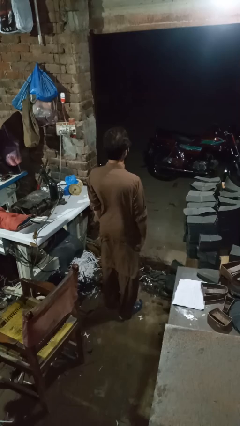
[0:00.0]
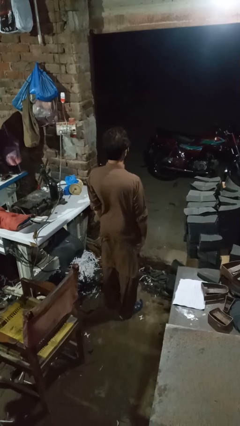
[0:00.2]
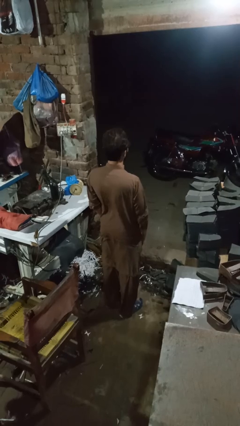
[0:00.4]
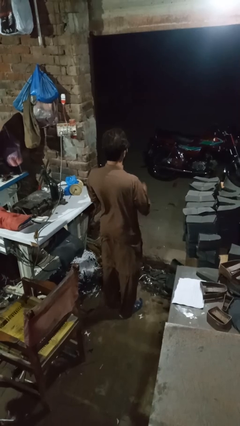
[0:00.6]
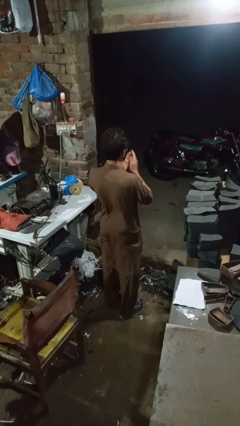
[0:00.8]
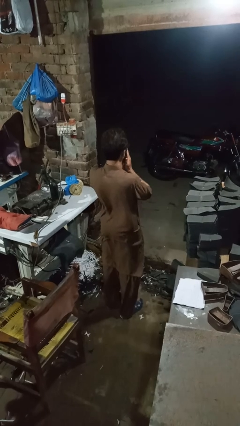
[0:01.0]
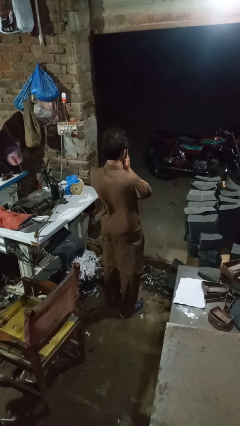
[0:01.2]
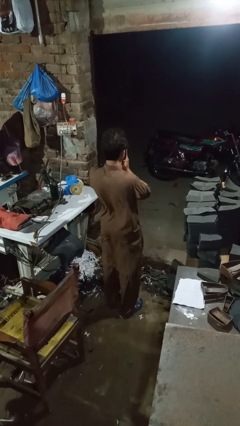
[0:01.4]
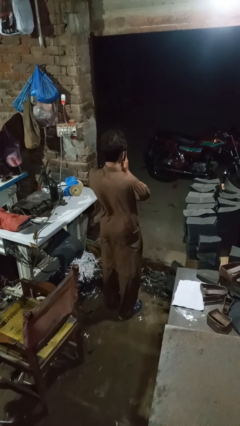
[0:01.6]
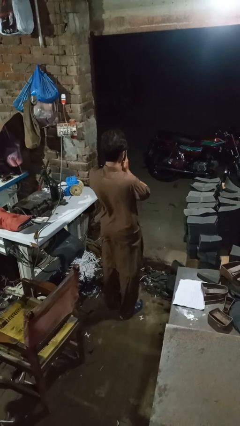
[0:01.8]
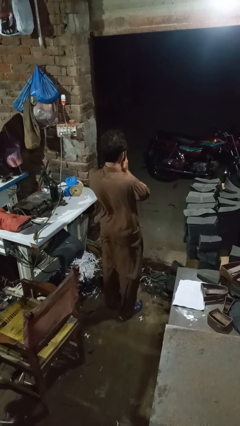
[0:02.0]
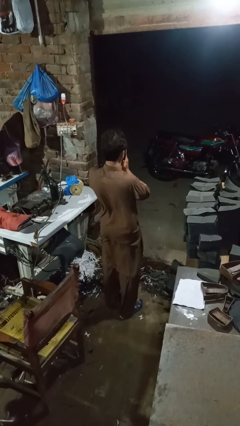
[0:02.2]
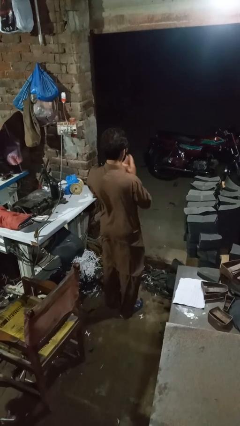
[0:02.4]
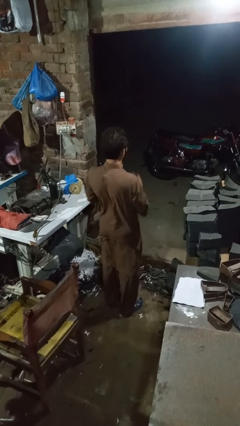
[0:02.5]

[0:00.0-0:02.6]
person sneezes into hand

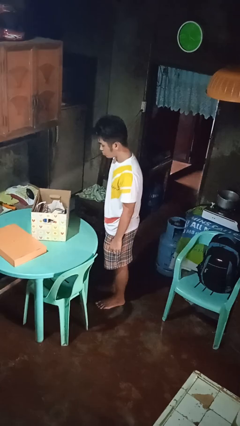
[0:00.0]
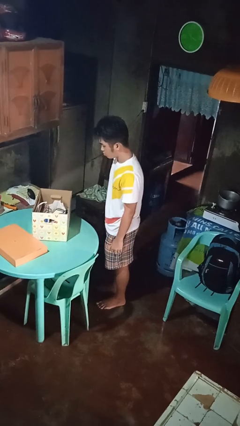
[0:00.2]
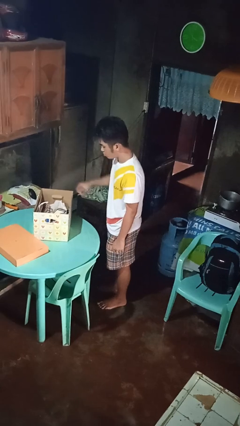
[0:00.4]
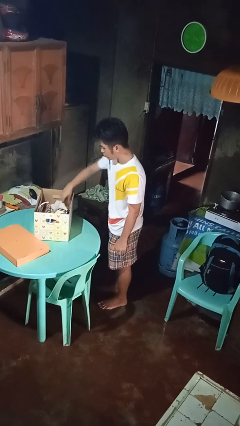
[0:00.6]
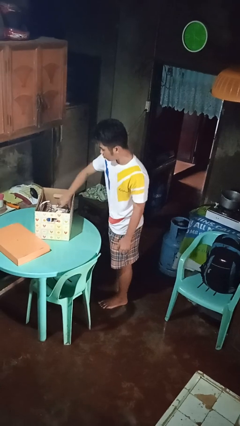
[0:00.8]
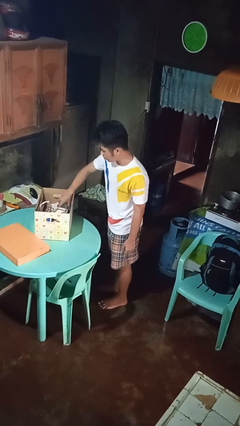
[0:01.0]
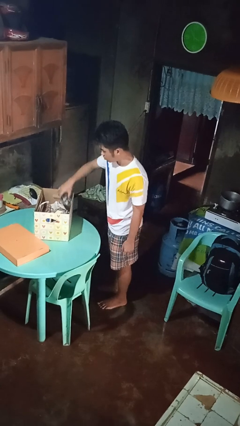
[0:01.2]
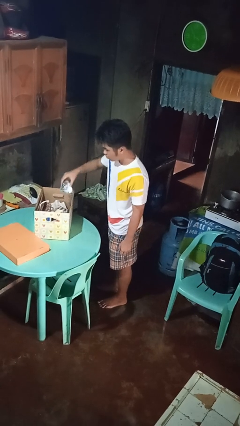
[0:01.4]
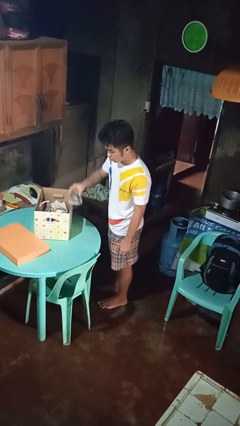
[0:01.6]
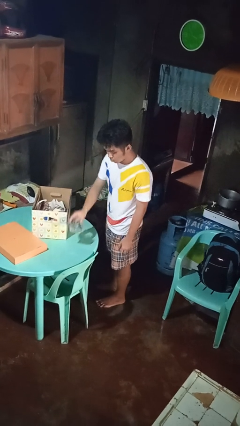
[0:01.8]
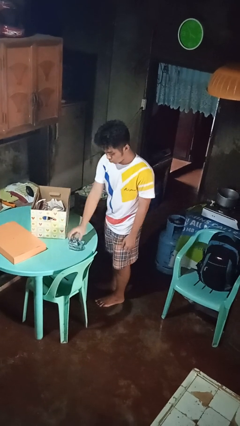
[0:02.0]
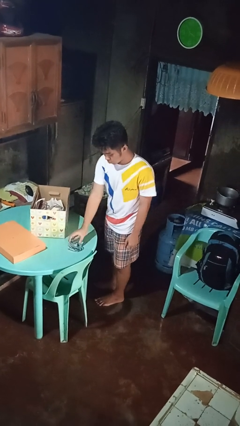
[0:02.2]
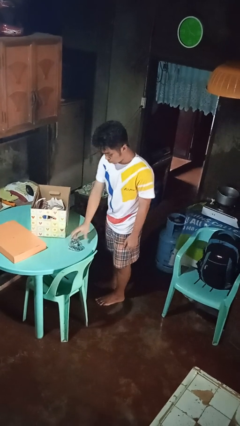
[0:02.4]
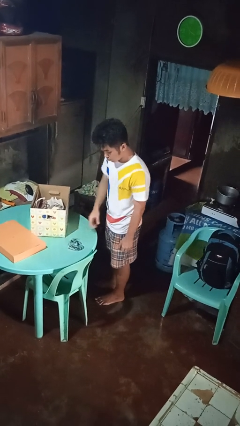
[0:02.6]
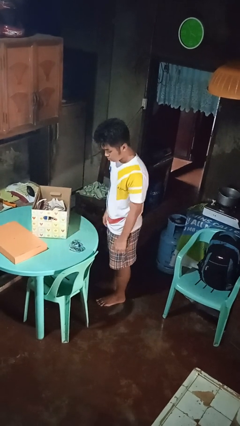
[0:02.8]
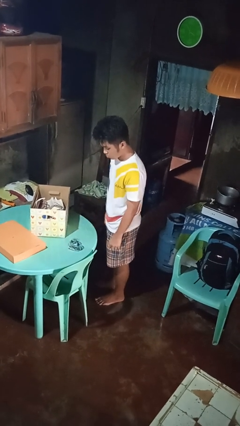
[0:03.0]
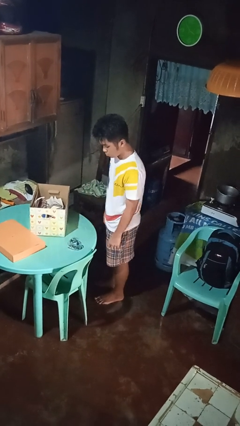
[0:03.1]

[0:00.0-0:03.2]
person takes object from box

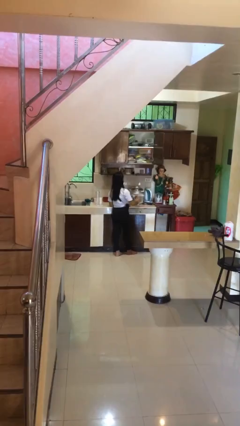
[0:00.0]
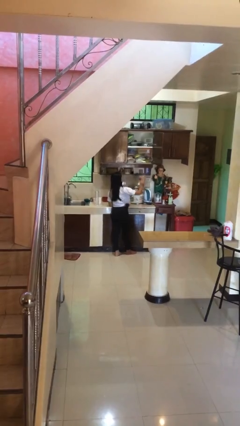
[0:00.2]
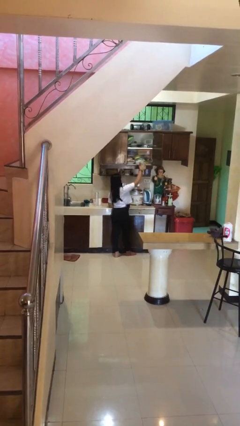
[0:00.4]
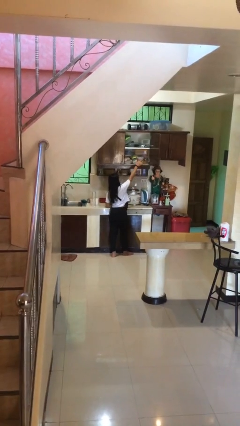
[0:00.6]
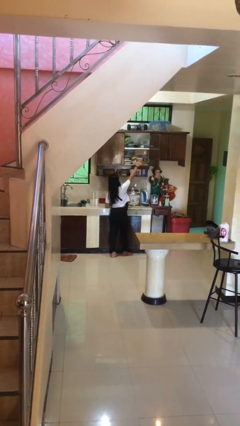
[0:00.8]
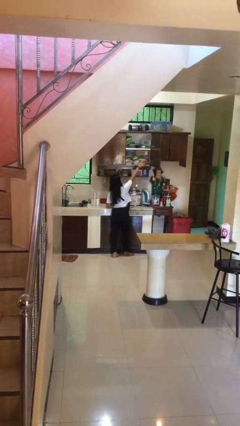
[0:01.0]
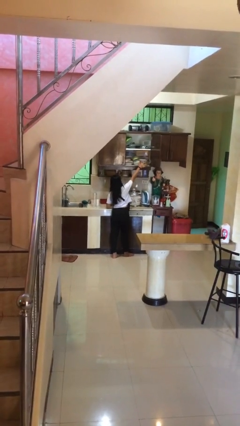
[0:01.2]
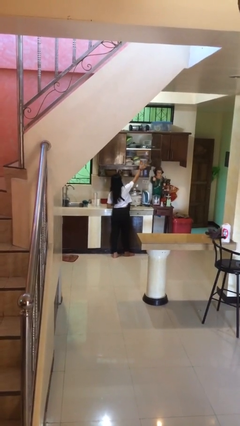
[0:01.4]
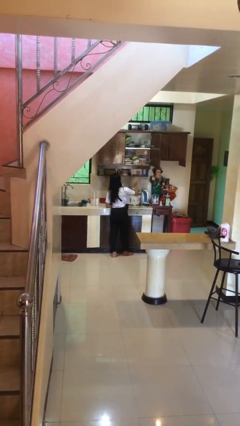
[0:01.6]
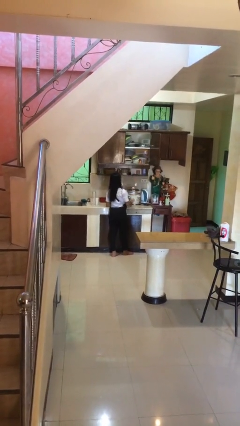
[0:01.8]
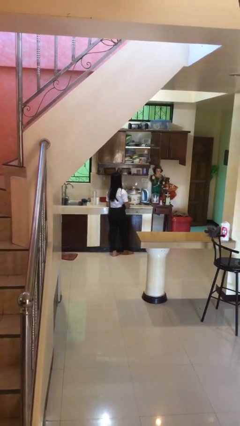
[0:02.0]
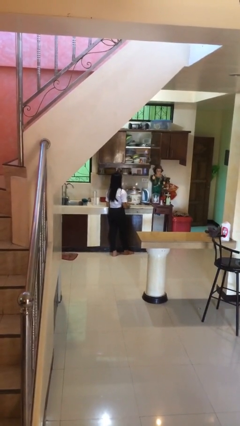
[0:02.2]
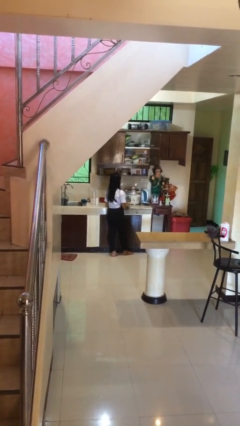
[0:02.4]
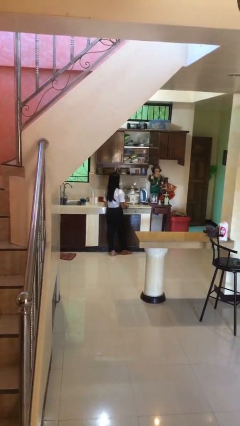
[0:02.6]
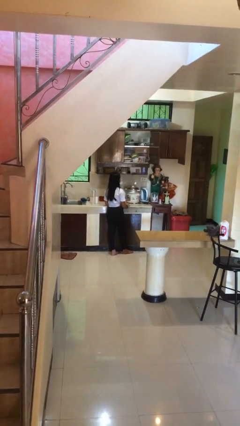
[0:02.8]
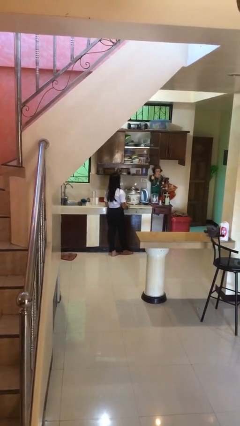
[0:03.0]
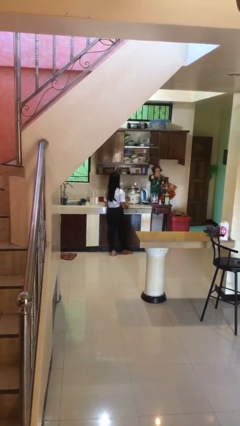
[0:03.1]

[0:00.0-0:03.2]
person puts down object on shelf

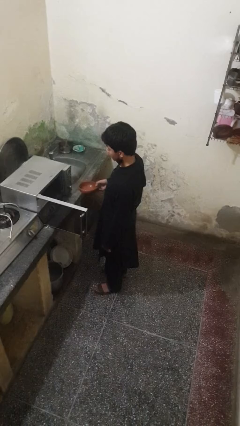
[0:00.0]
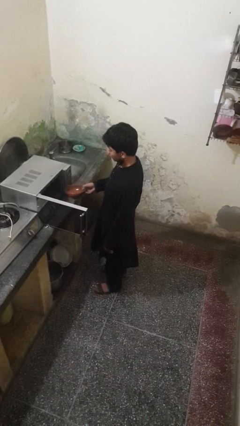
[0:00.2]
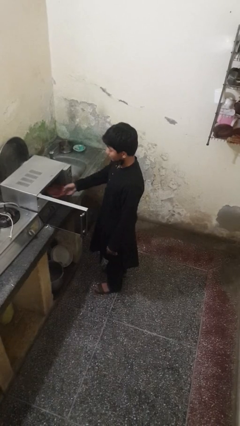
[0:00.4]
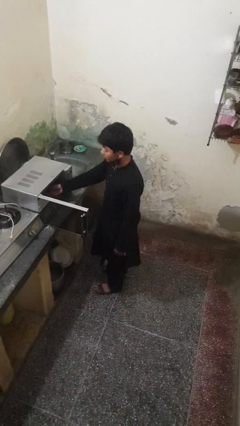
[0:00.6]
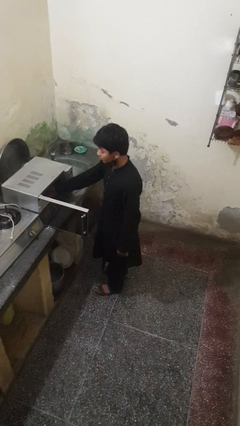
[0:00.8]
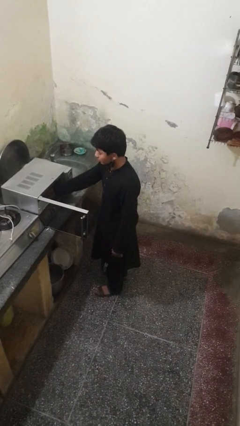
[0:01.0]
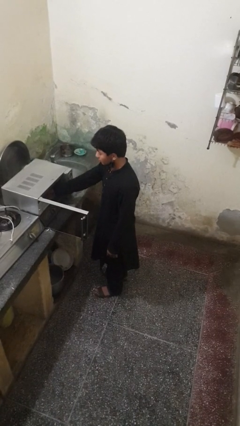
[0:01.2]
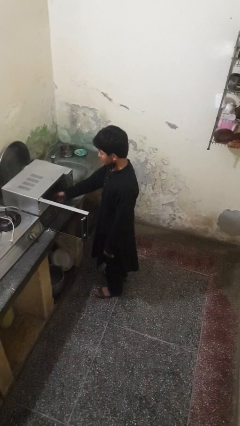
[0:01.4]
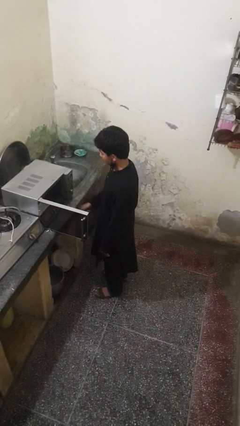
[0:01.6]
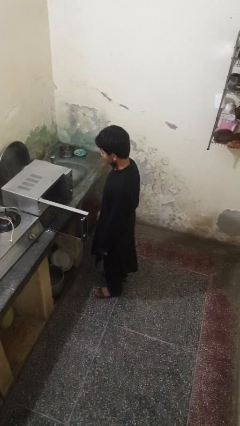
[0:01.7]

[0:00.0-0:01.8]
person puts object into microwave

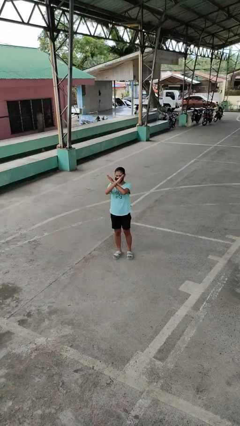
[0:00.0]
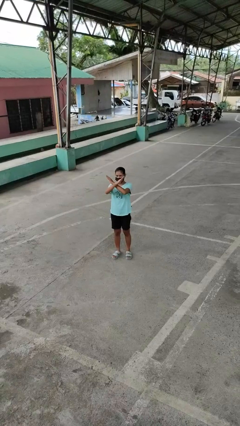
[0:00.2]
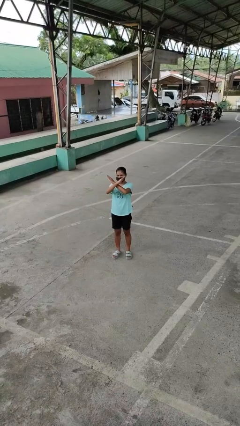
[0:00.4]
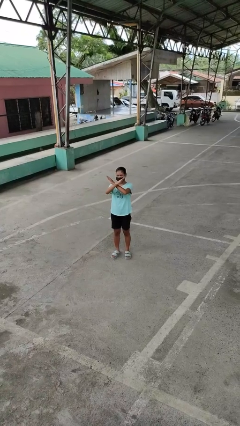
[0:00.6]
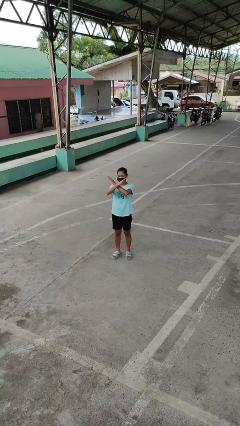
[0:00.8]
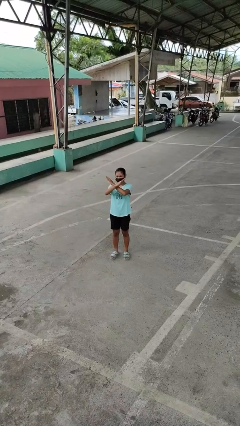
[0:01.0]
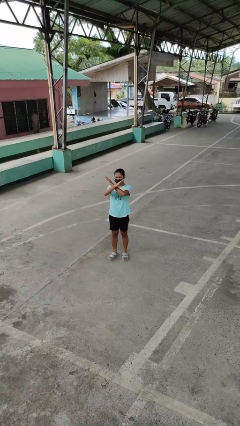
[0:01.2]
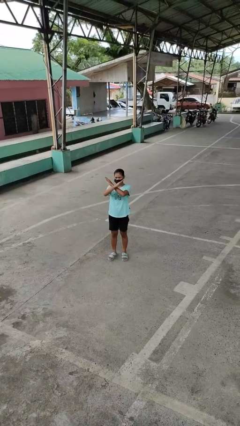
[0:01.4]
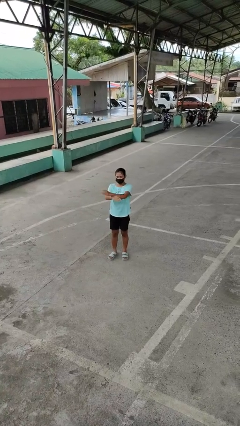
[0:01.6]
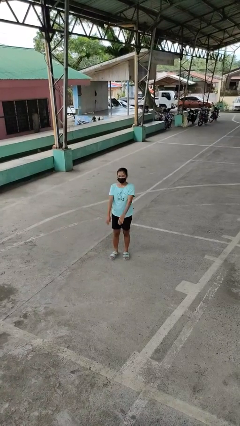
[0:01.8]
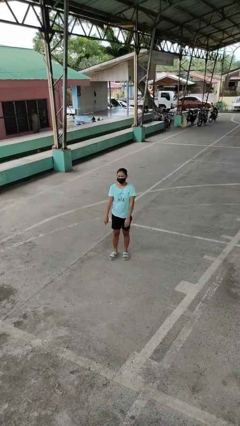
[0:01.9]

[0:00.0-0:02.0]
person gestures arms x

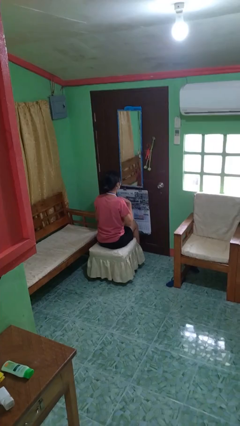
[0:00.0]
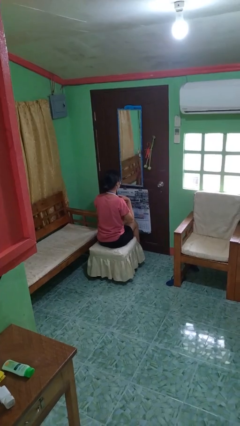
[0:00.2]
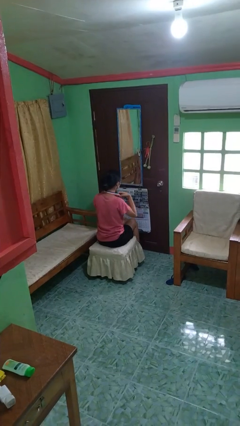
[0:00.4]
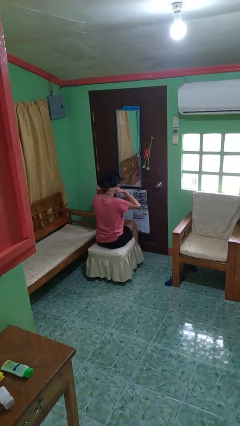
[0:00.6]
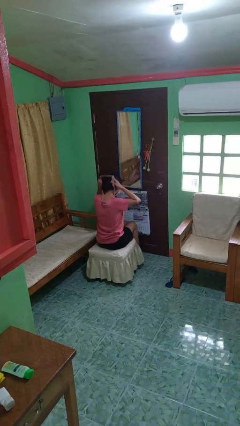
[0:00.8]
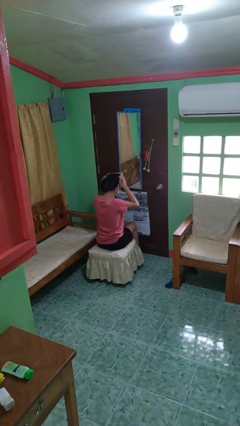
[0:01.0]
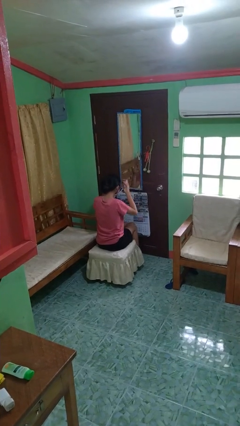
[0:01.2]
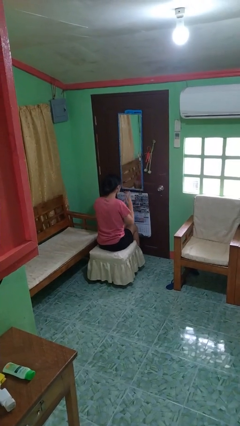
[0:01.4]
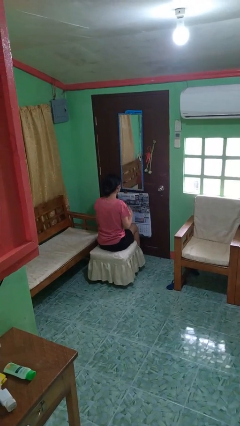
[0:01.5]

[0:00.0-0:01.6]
person takes off necklace

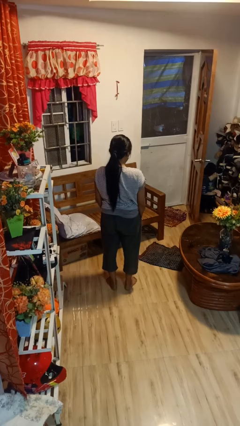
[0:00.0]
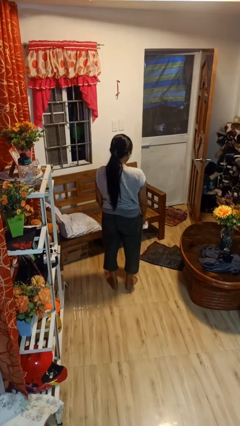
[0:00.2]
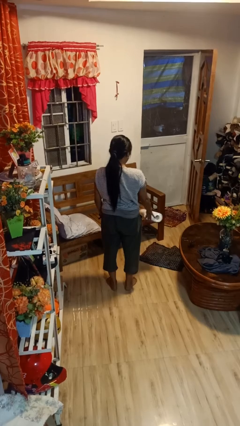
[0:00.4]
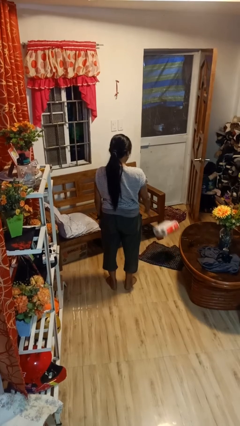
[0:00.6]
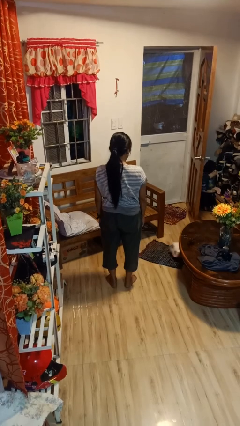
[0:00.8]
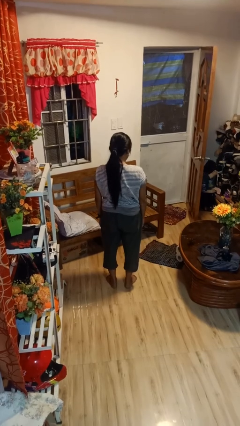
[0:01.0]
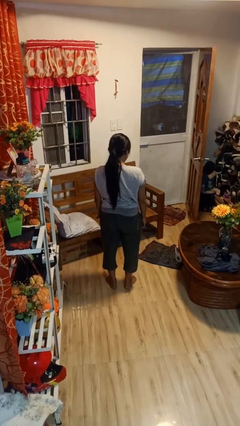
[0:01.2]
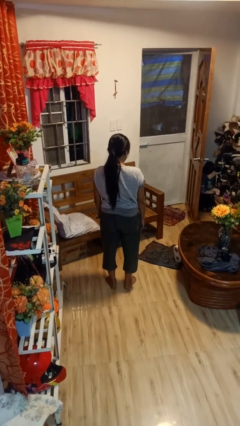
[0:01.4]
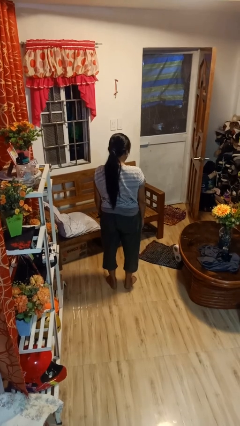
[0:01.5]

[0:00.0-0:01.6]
person throws object to ground

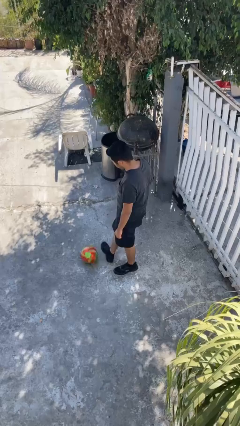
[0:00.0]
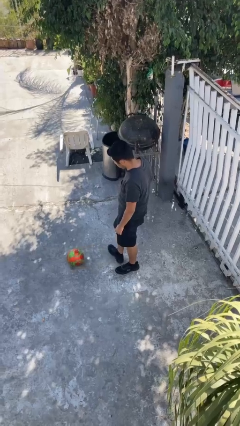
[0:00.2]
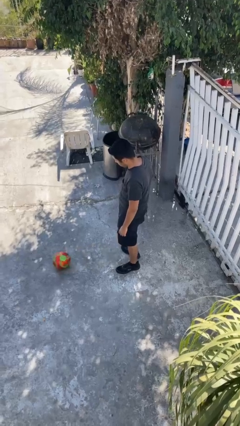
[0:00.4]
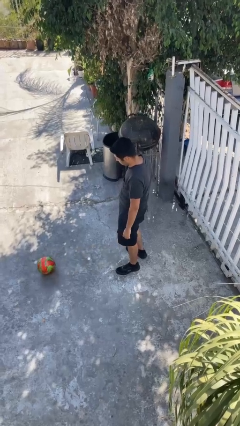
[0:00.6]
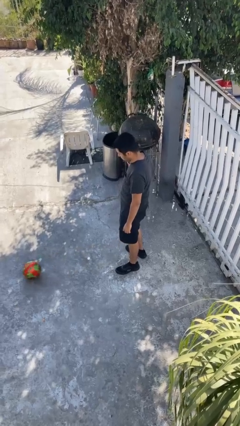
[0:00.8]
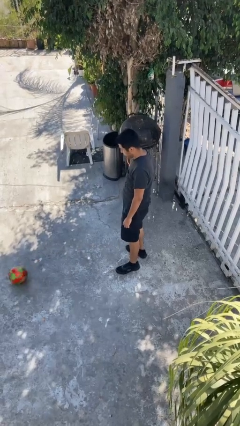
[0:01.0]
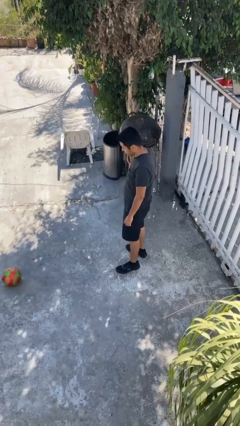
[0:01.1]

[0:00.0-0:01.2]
person kicks object to person
